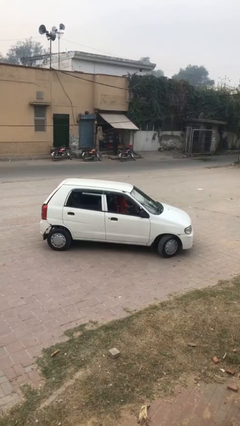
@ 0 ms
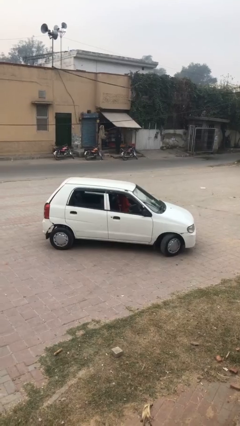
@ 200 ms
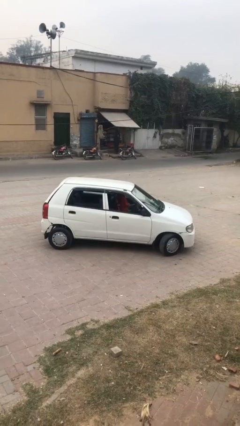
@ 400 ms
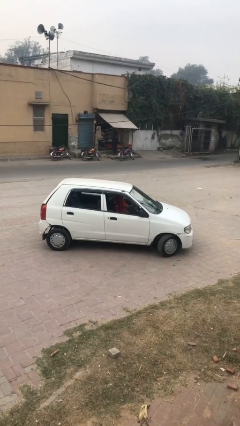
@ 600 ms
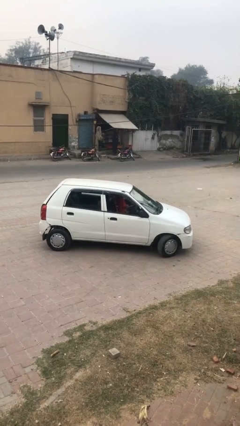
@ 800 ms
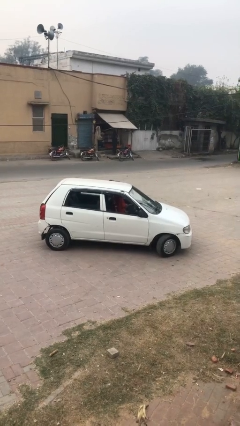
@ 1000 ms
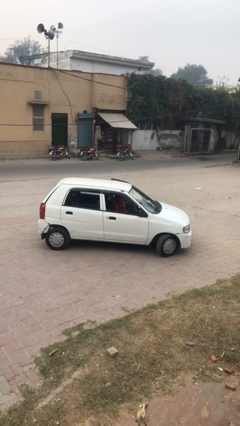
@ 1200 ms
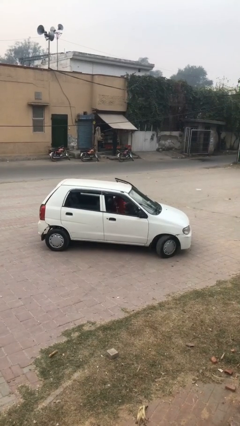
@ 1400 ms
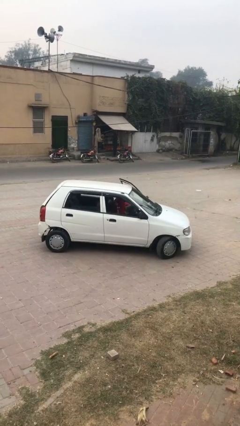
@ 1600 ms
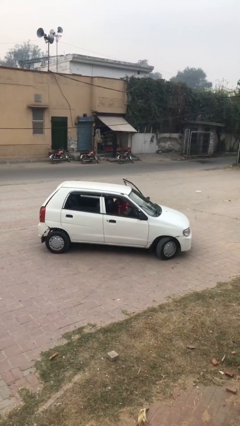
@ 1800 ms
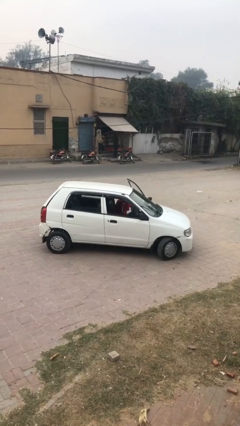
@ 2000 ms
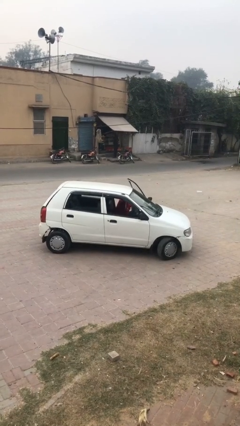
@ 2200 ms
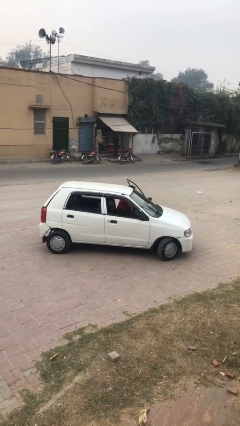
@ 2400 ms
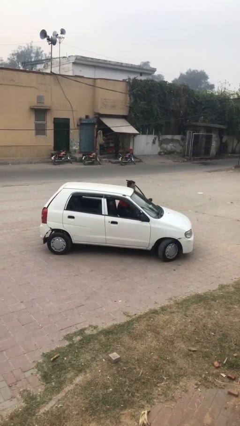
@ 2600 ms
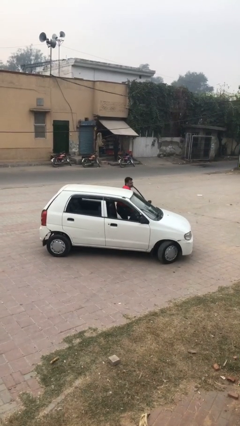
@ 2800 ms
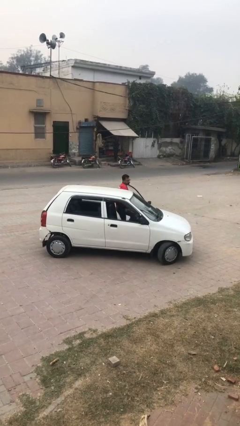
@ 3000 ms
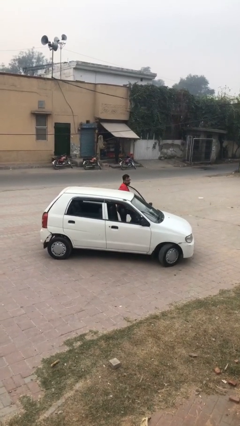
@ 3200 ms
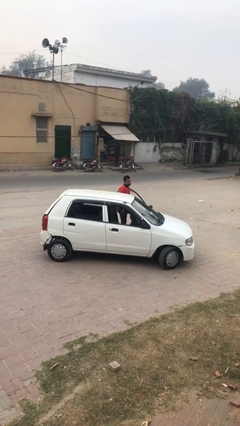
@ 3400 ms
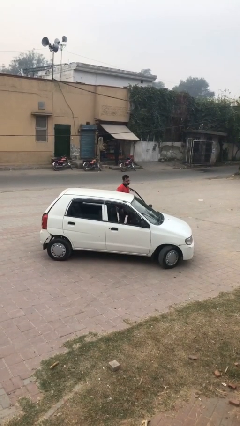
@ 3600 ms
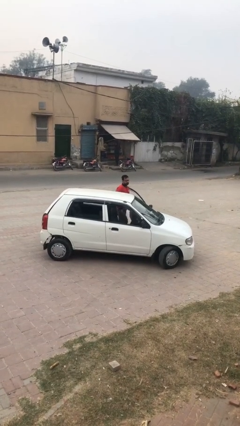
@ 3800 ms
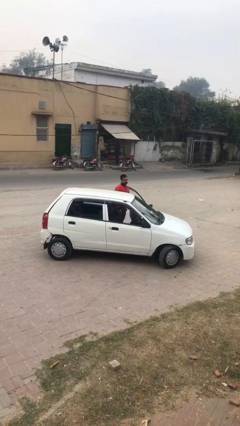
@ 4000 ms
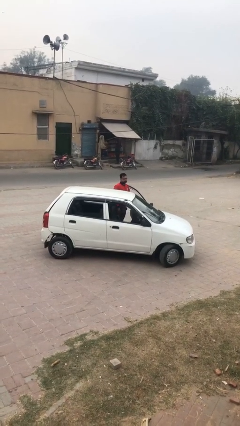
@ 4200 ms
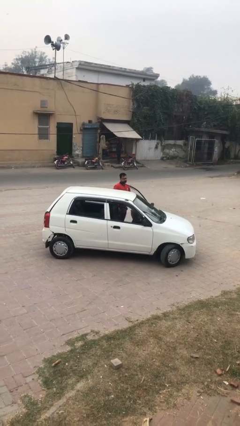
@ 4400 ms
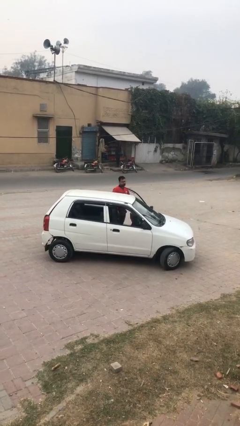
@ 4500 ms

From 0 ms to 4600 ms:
person exits car

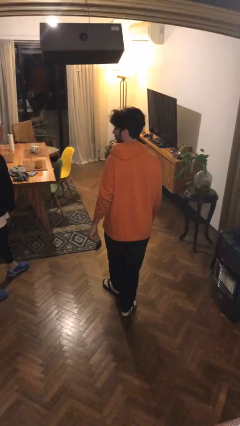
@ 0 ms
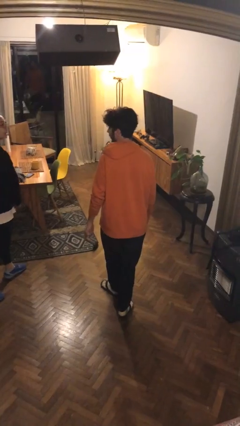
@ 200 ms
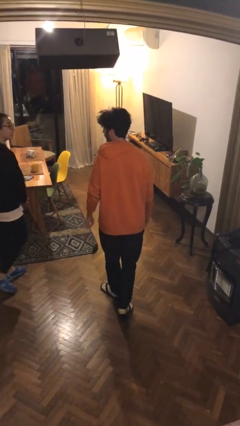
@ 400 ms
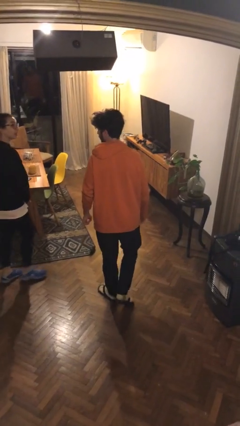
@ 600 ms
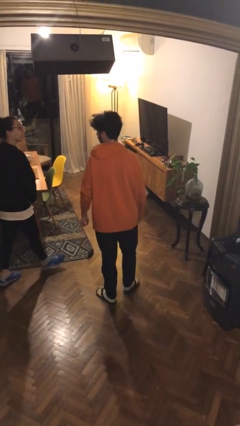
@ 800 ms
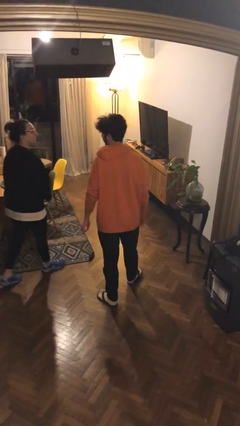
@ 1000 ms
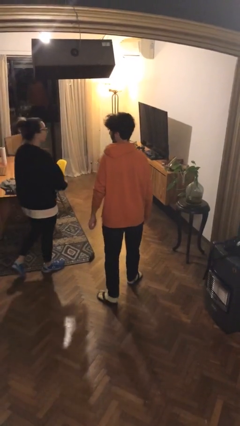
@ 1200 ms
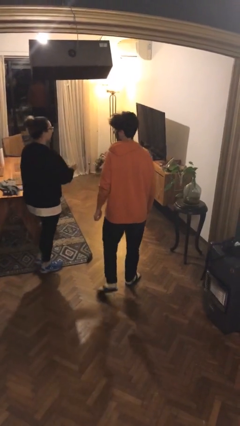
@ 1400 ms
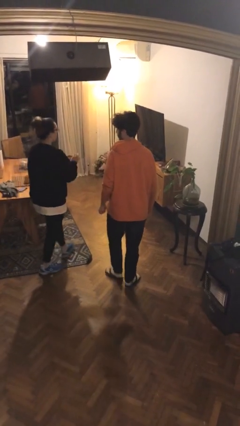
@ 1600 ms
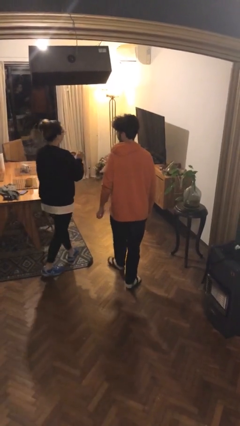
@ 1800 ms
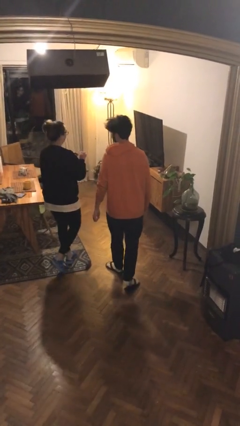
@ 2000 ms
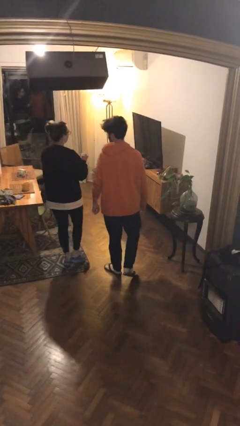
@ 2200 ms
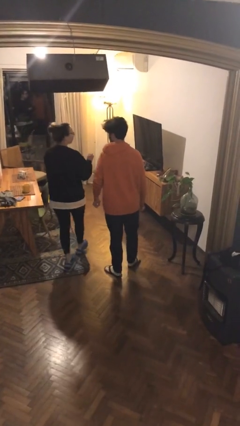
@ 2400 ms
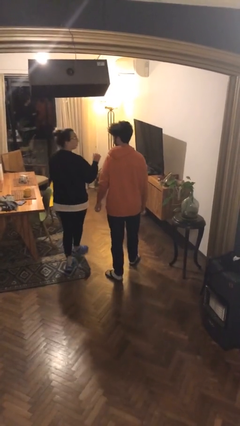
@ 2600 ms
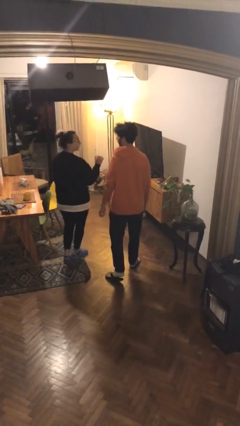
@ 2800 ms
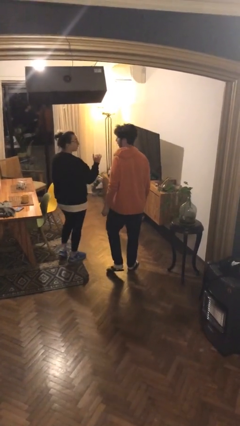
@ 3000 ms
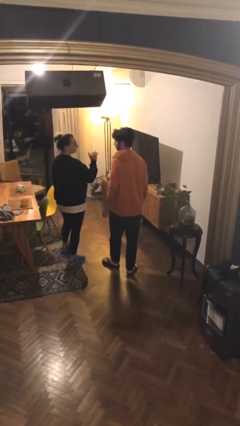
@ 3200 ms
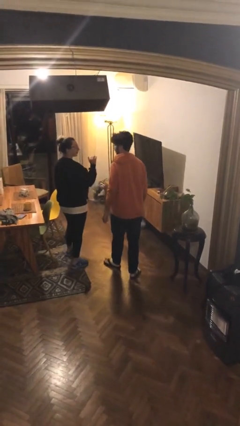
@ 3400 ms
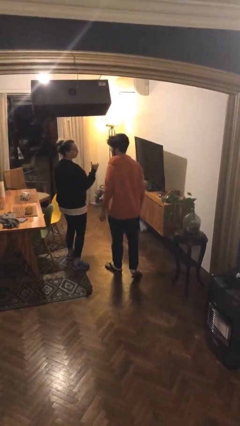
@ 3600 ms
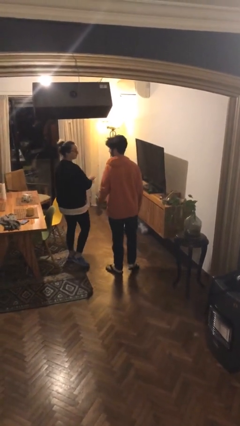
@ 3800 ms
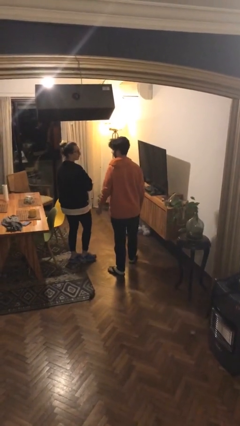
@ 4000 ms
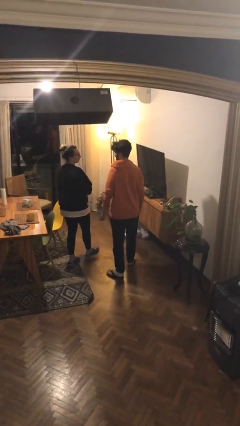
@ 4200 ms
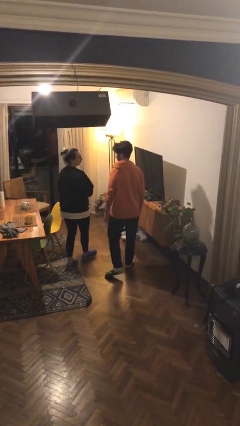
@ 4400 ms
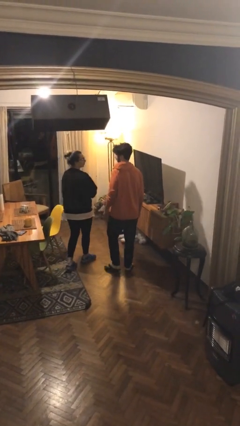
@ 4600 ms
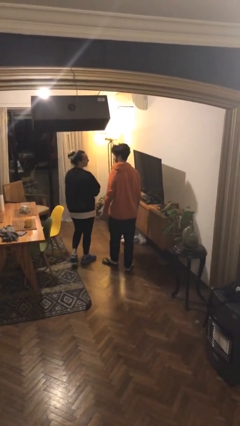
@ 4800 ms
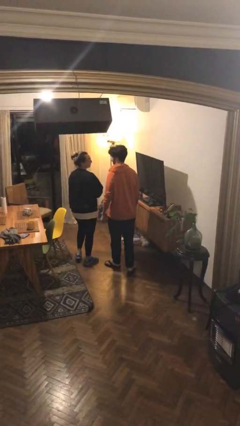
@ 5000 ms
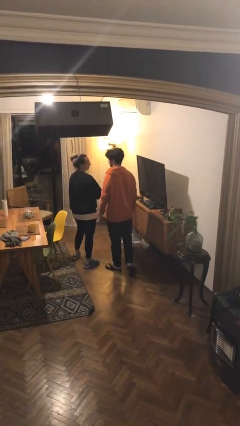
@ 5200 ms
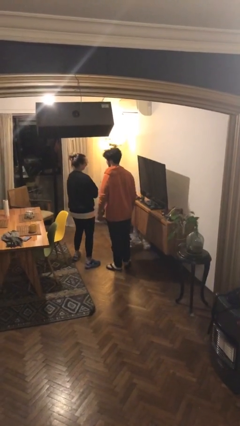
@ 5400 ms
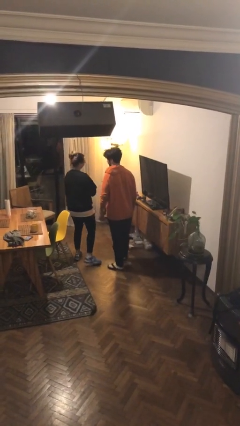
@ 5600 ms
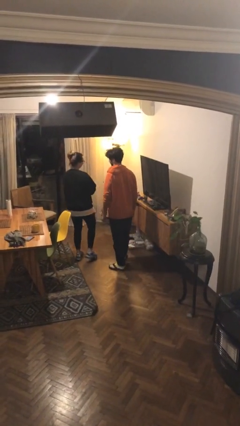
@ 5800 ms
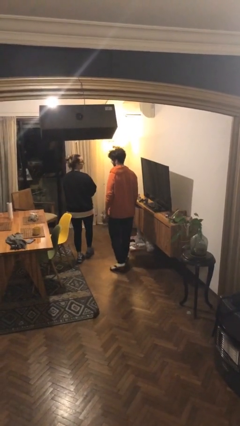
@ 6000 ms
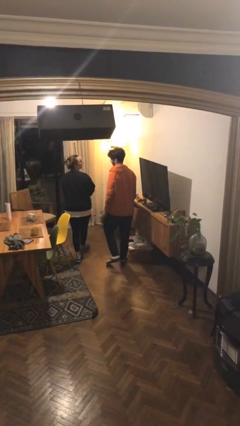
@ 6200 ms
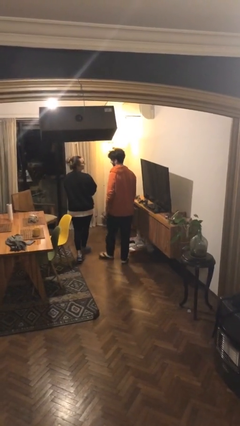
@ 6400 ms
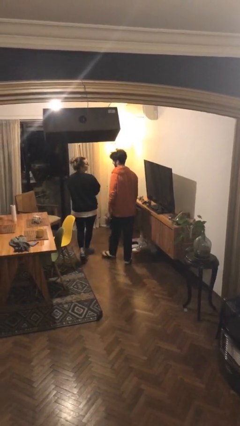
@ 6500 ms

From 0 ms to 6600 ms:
person talks to person

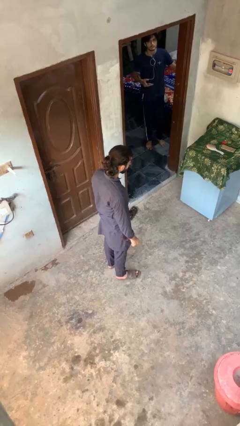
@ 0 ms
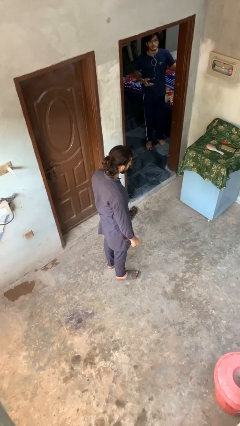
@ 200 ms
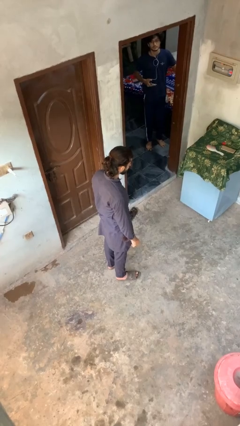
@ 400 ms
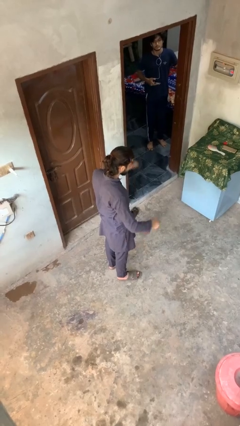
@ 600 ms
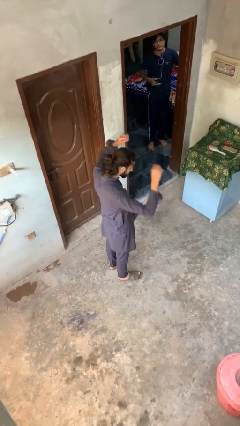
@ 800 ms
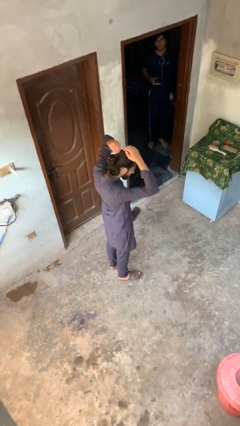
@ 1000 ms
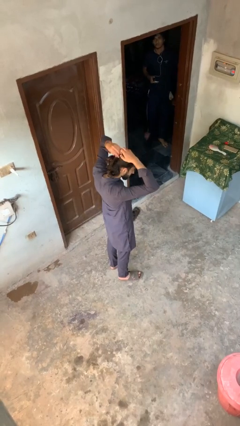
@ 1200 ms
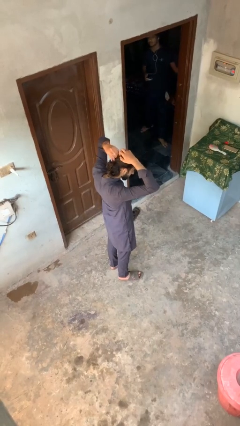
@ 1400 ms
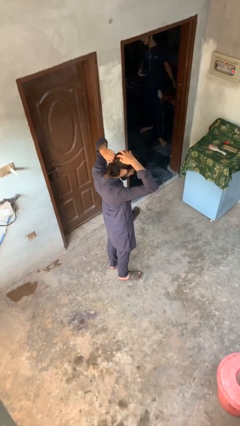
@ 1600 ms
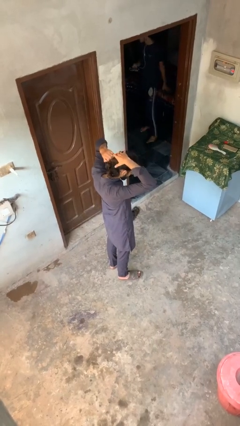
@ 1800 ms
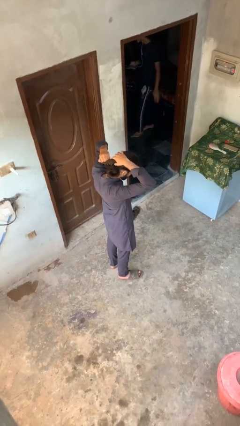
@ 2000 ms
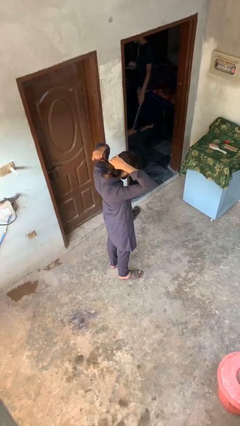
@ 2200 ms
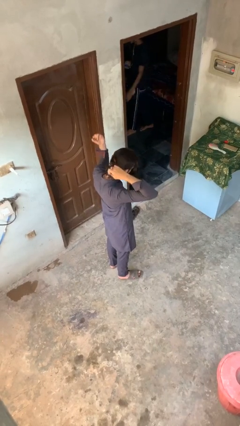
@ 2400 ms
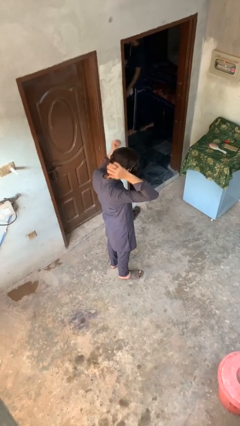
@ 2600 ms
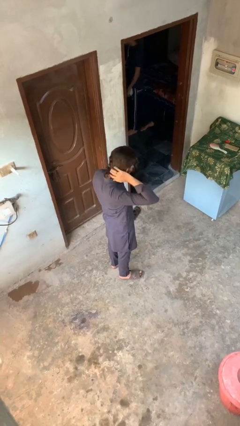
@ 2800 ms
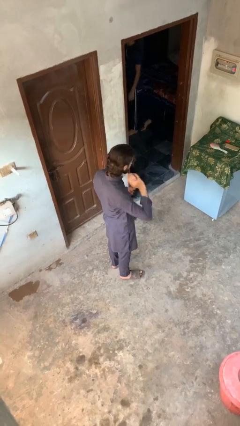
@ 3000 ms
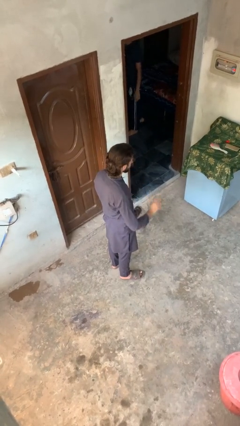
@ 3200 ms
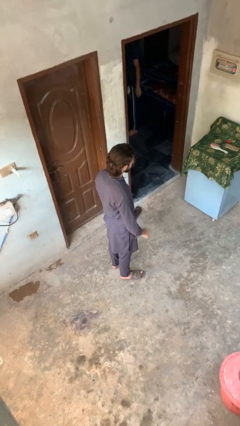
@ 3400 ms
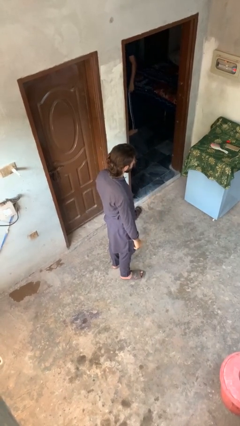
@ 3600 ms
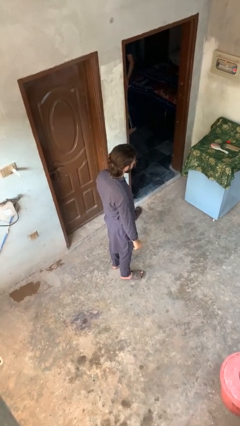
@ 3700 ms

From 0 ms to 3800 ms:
person takes off hairtie

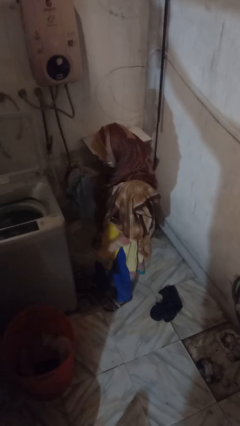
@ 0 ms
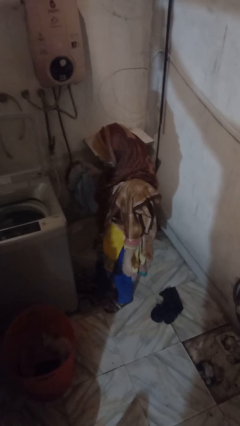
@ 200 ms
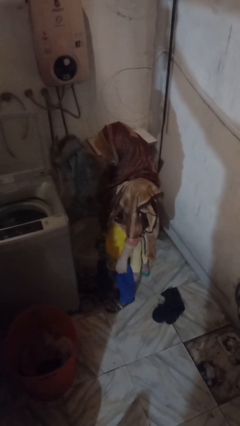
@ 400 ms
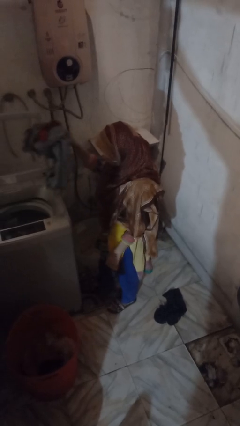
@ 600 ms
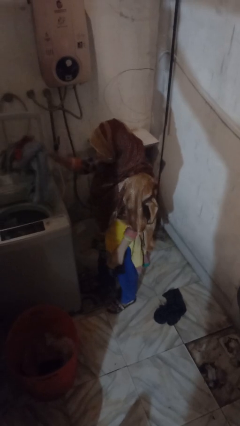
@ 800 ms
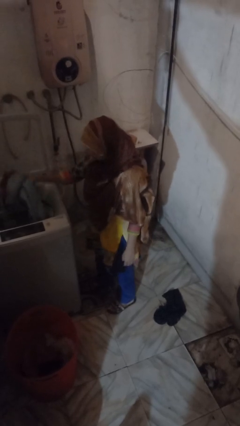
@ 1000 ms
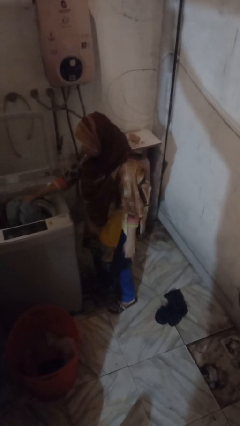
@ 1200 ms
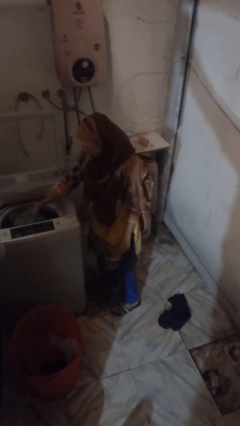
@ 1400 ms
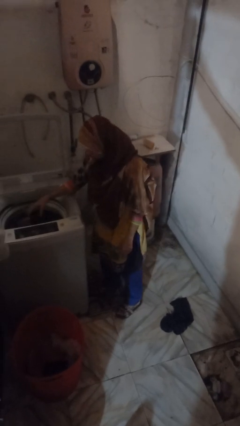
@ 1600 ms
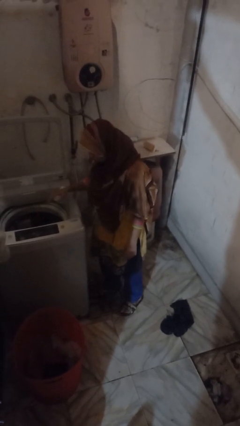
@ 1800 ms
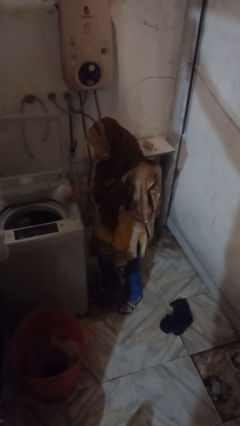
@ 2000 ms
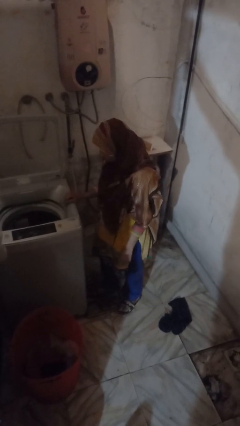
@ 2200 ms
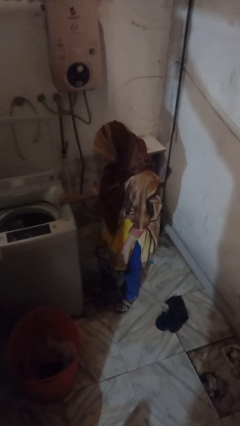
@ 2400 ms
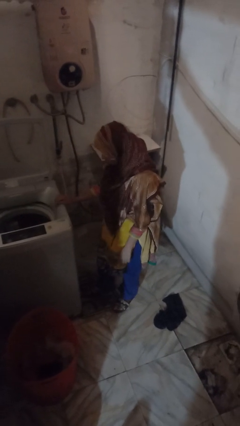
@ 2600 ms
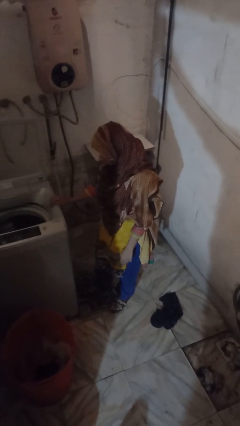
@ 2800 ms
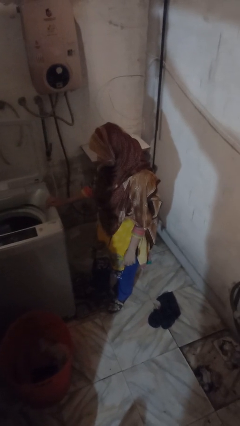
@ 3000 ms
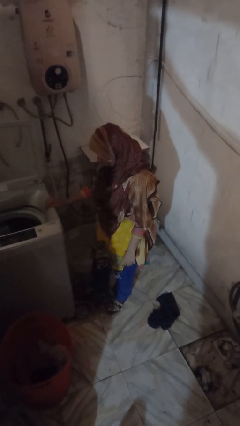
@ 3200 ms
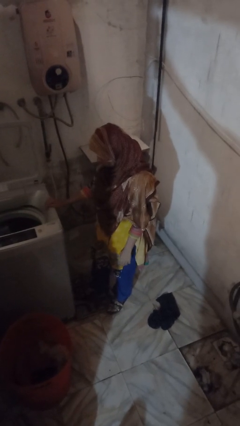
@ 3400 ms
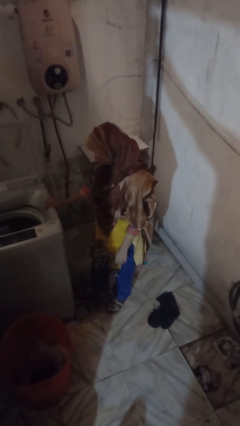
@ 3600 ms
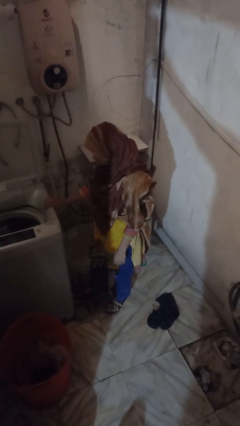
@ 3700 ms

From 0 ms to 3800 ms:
person loads dryer
